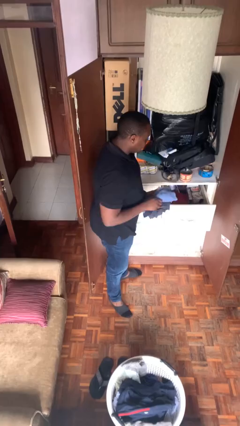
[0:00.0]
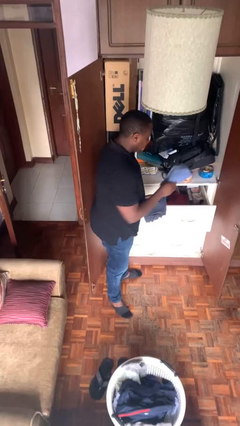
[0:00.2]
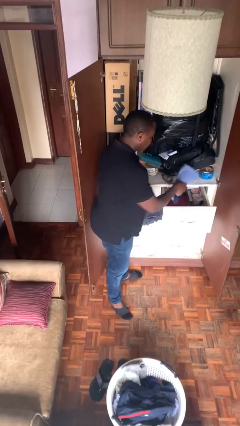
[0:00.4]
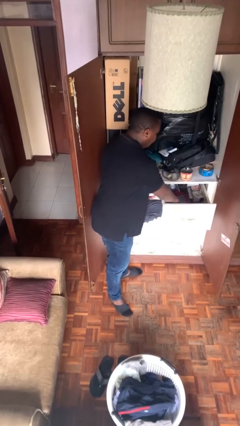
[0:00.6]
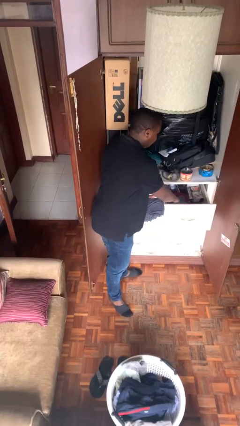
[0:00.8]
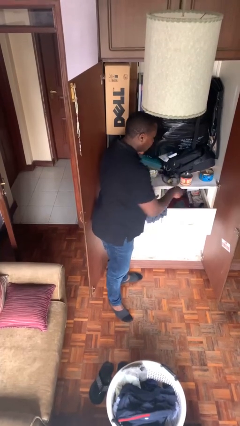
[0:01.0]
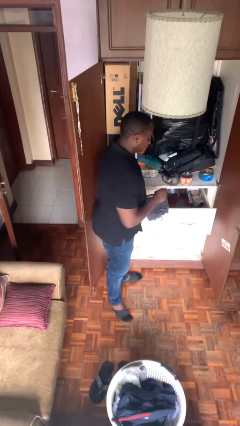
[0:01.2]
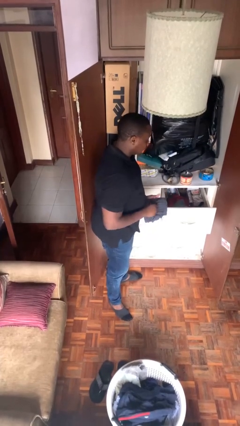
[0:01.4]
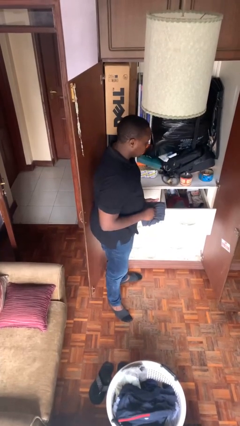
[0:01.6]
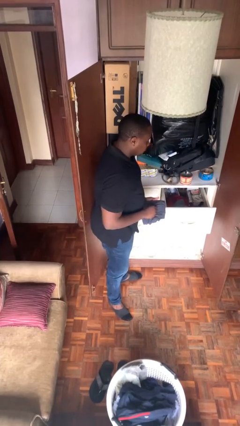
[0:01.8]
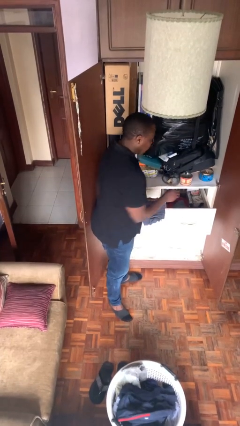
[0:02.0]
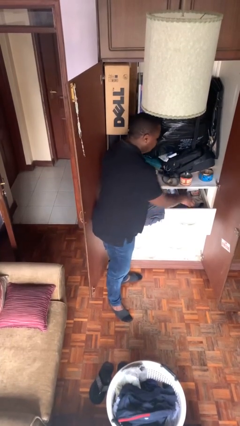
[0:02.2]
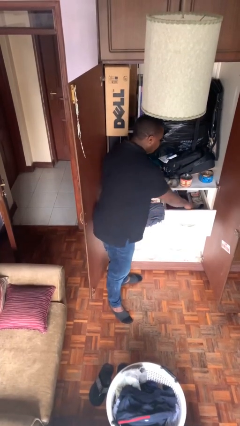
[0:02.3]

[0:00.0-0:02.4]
person puts clothes into dresser

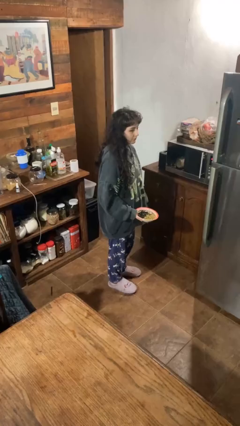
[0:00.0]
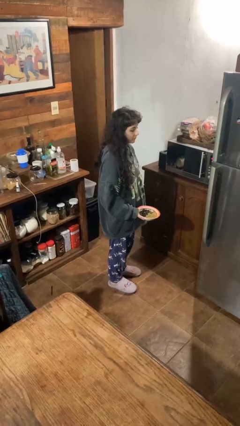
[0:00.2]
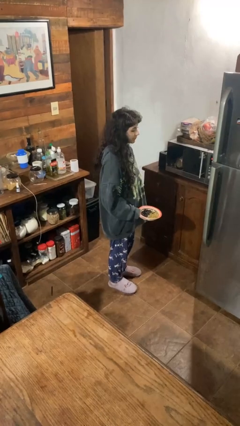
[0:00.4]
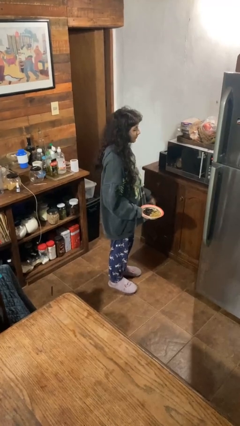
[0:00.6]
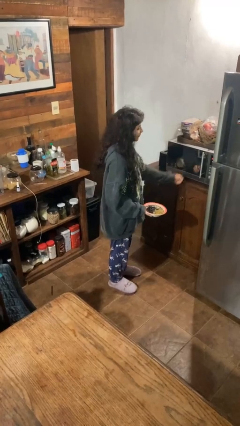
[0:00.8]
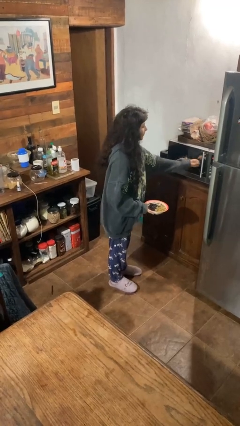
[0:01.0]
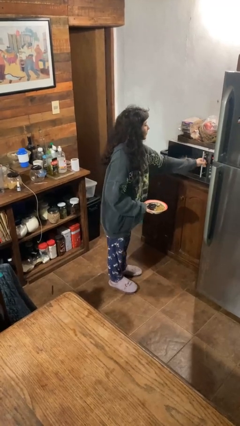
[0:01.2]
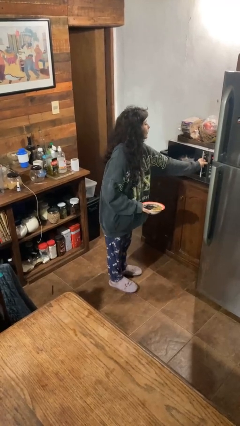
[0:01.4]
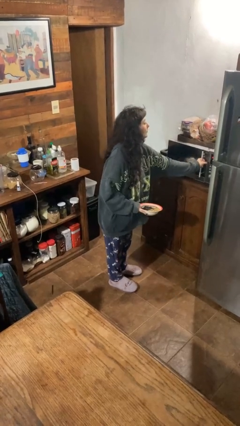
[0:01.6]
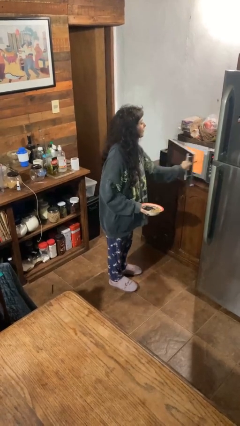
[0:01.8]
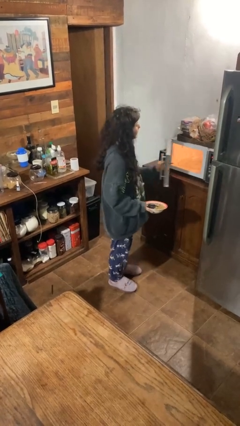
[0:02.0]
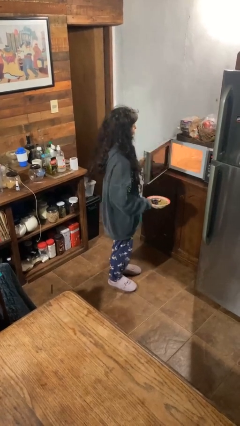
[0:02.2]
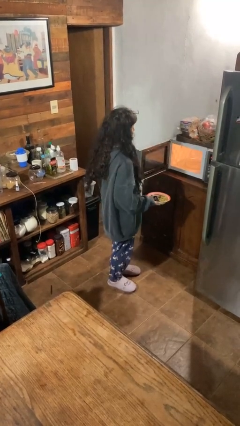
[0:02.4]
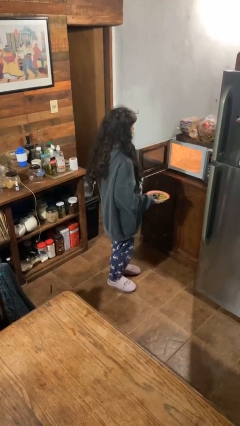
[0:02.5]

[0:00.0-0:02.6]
person opens microwave

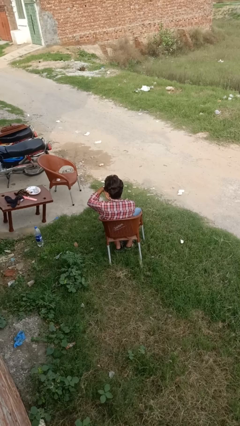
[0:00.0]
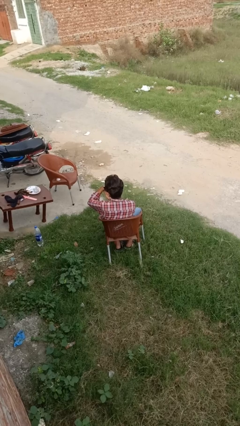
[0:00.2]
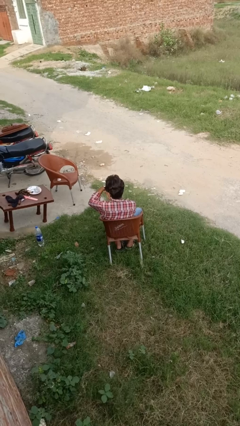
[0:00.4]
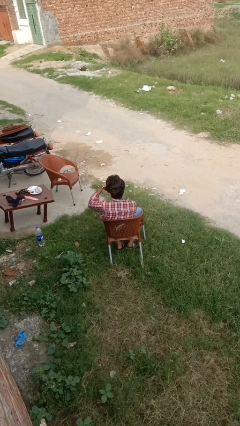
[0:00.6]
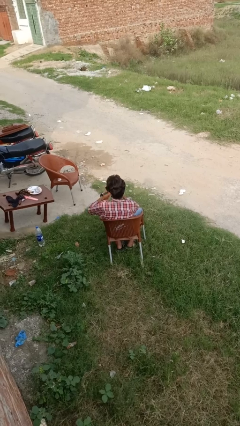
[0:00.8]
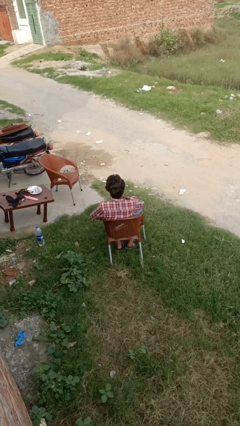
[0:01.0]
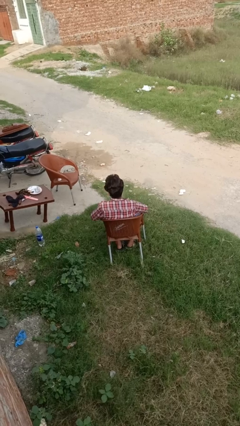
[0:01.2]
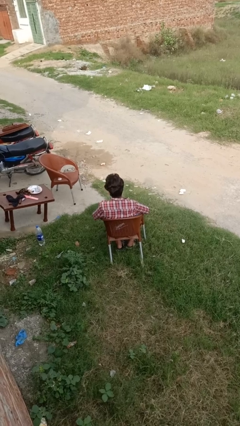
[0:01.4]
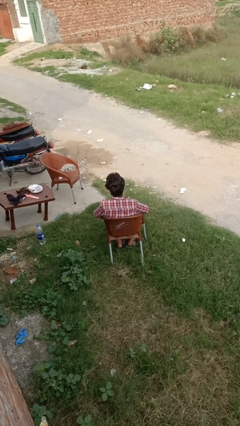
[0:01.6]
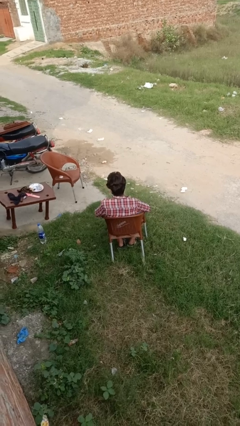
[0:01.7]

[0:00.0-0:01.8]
person takes off wristwatch

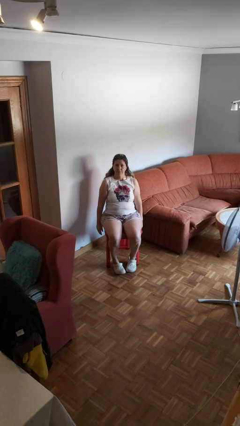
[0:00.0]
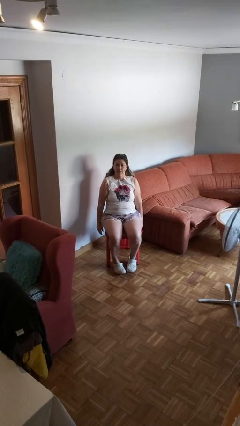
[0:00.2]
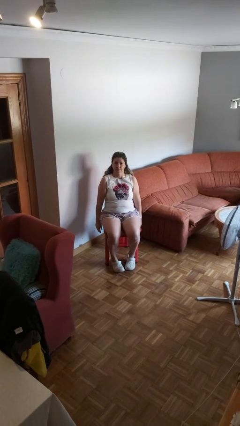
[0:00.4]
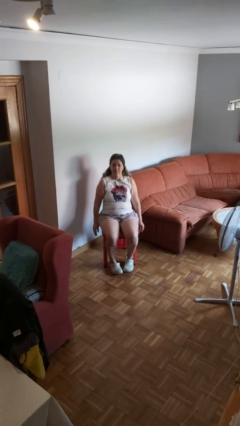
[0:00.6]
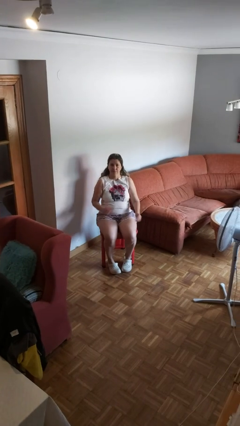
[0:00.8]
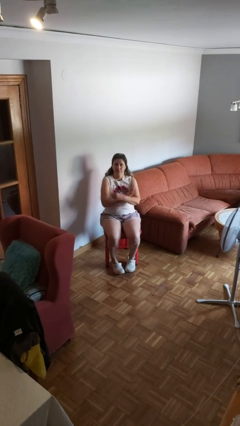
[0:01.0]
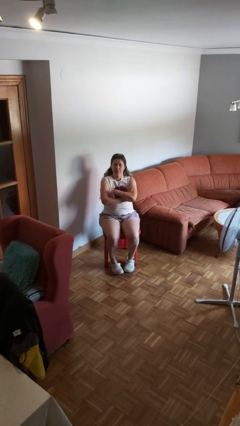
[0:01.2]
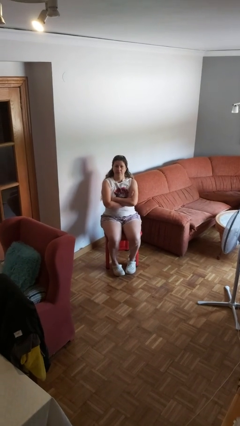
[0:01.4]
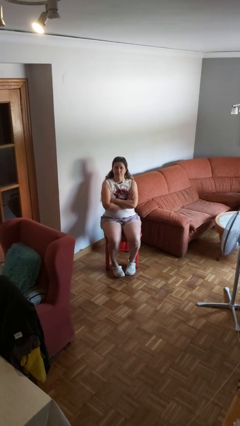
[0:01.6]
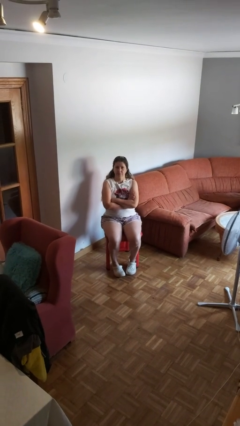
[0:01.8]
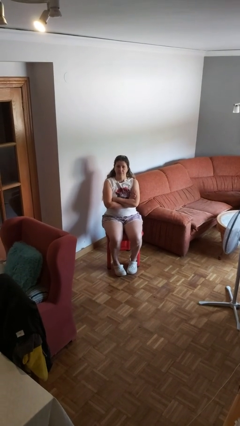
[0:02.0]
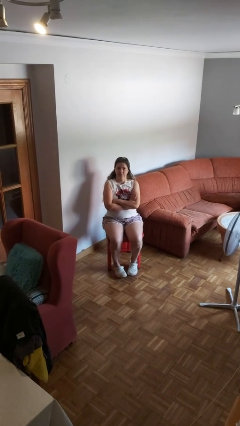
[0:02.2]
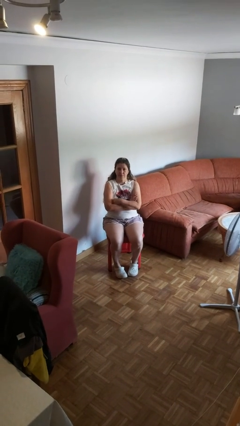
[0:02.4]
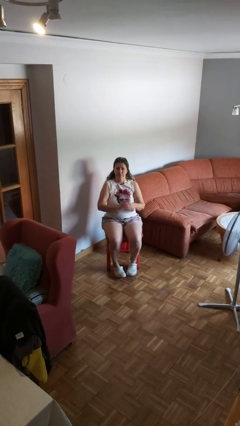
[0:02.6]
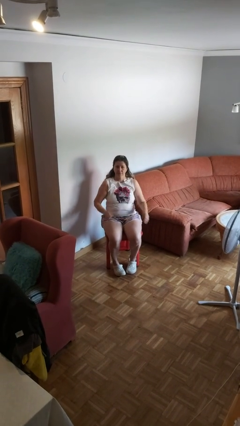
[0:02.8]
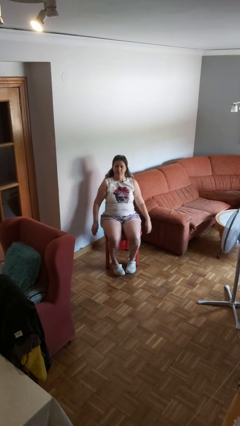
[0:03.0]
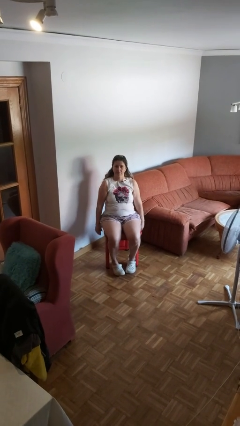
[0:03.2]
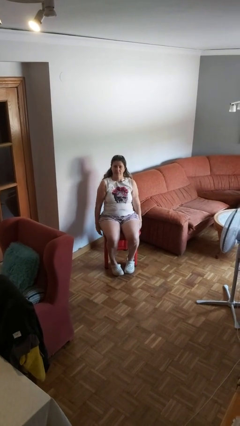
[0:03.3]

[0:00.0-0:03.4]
person crosses arms

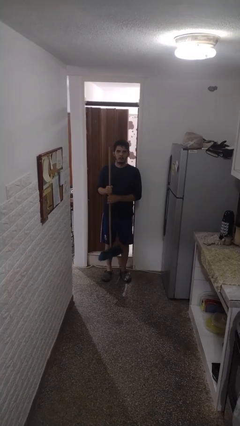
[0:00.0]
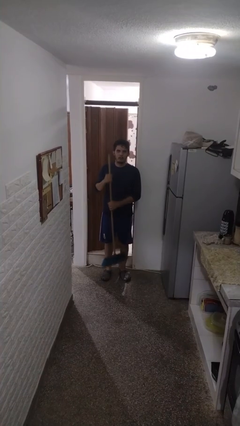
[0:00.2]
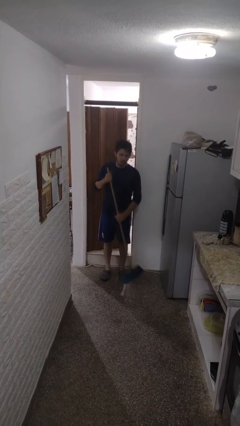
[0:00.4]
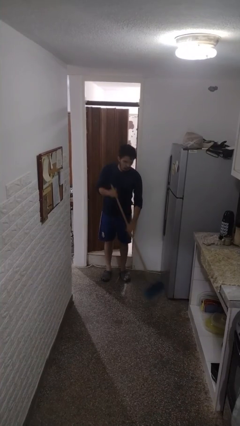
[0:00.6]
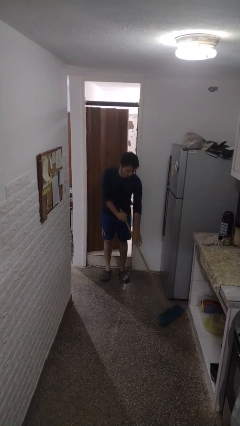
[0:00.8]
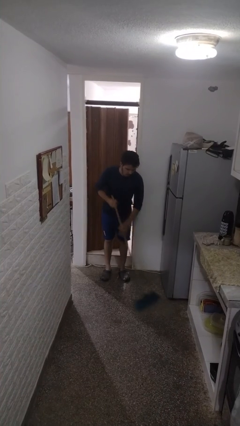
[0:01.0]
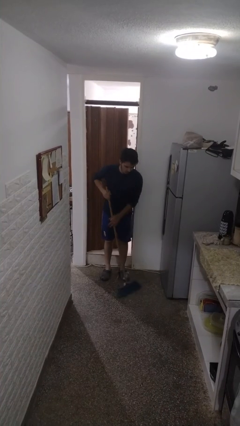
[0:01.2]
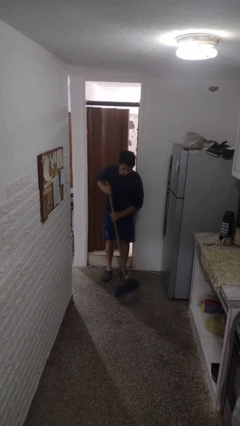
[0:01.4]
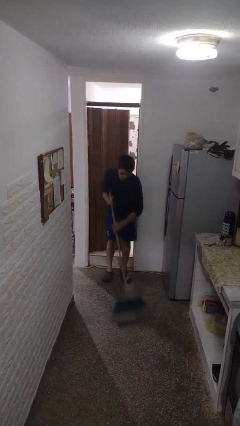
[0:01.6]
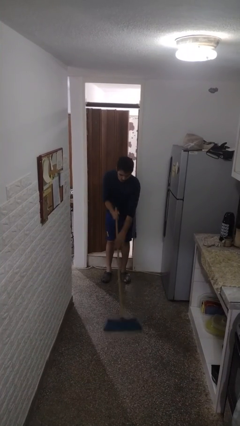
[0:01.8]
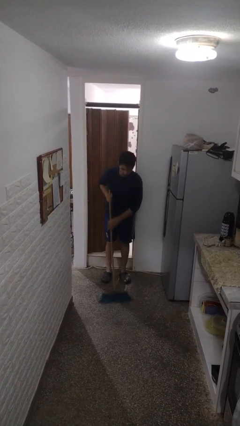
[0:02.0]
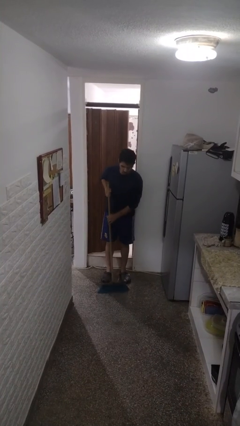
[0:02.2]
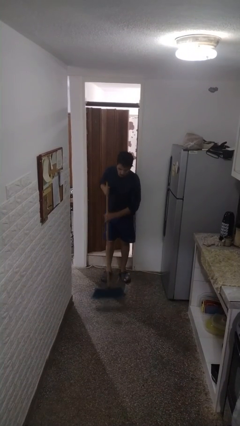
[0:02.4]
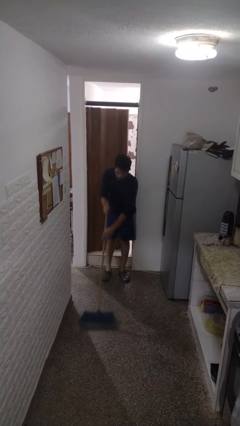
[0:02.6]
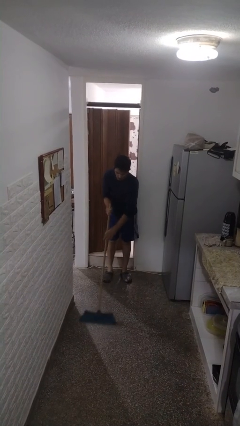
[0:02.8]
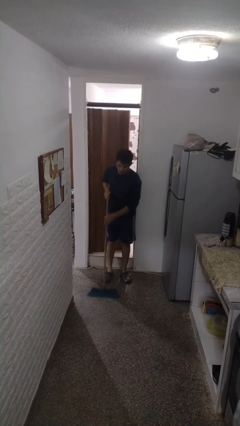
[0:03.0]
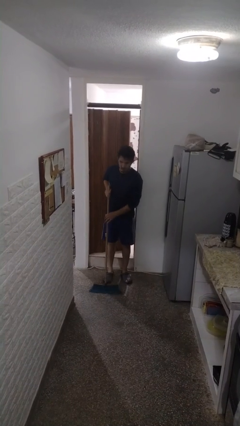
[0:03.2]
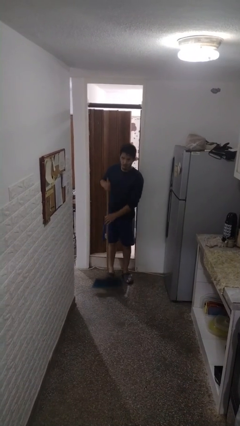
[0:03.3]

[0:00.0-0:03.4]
person sweeps floor

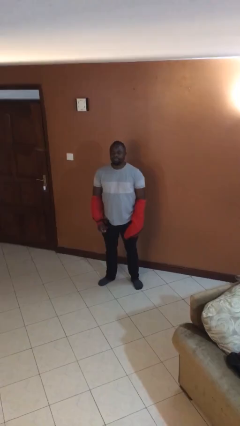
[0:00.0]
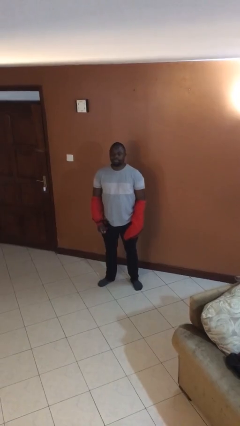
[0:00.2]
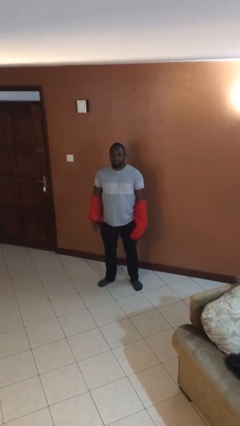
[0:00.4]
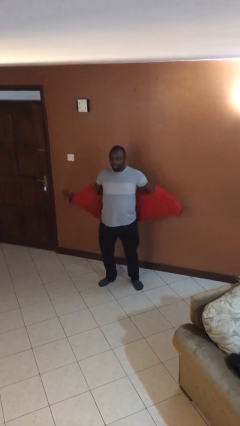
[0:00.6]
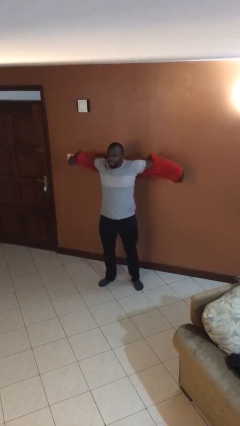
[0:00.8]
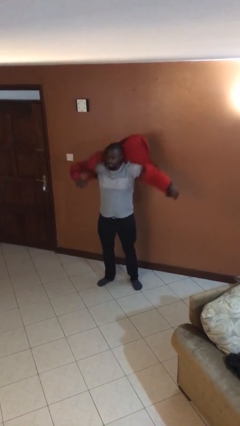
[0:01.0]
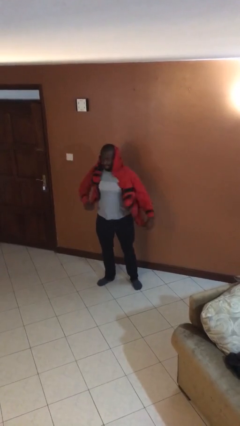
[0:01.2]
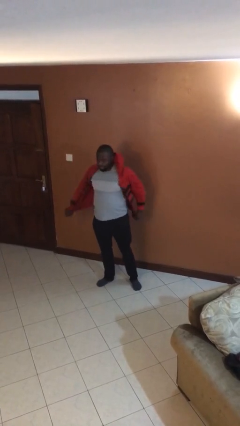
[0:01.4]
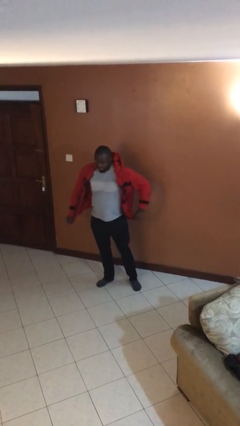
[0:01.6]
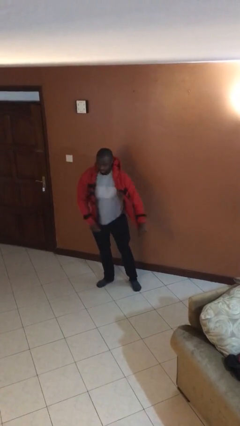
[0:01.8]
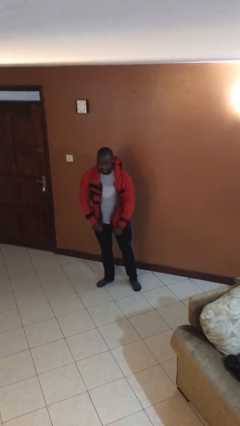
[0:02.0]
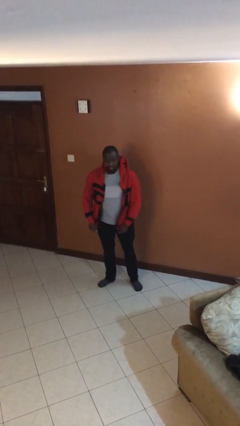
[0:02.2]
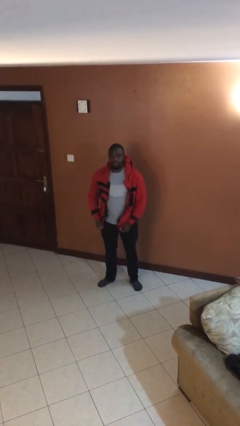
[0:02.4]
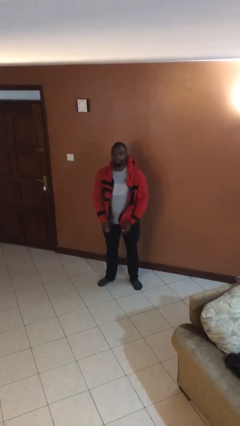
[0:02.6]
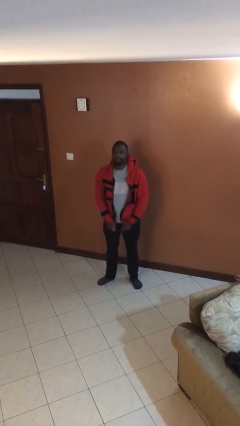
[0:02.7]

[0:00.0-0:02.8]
person puts on jacket

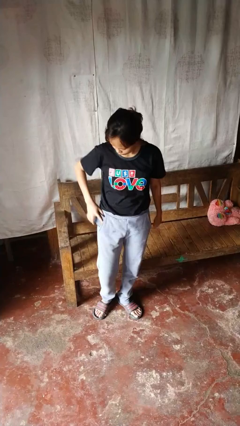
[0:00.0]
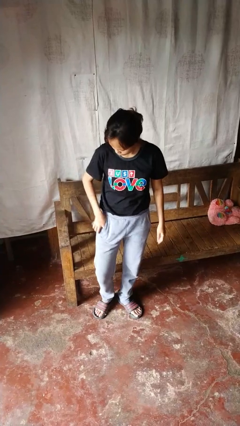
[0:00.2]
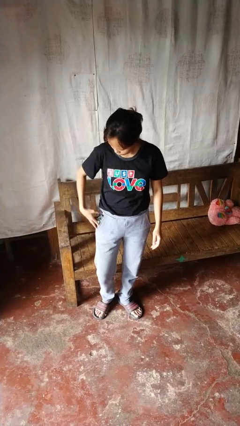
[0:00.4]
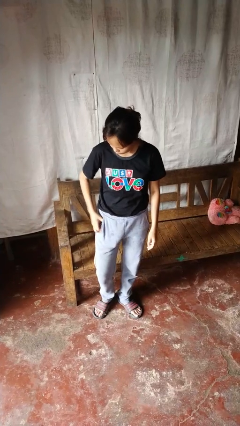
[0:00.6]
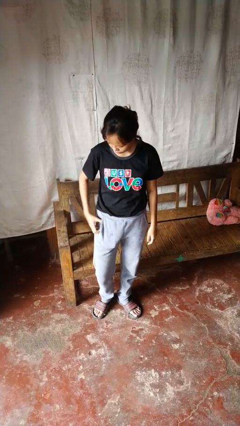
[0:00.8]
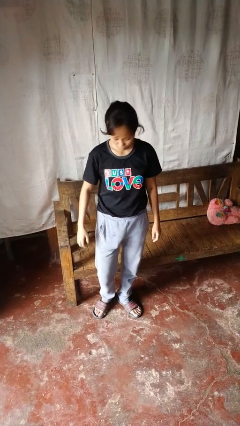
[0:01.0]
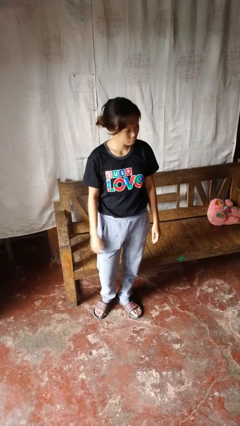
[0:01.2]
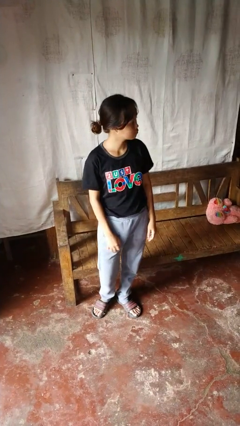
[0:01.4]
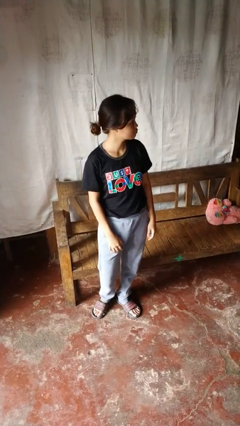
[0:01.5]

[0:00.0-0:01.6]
person puts phone into pocket
